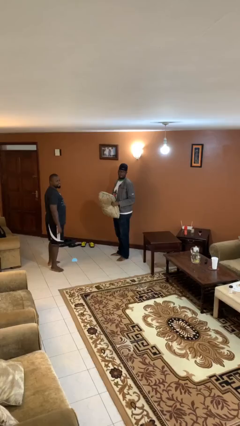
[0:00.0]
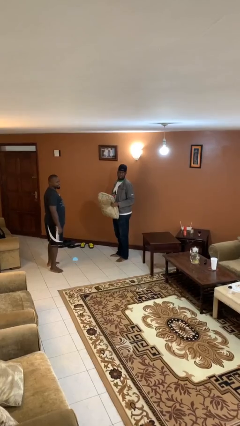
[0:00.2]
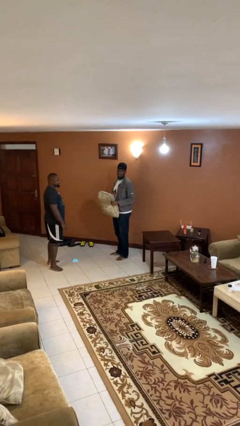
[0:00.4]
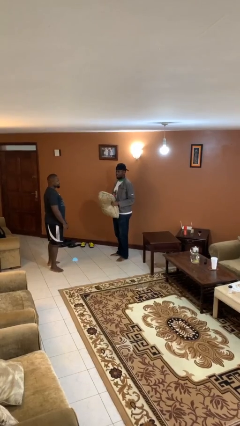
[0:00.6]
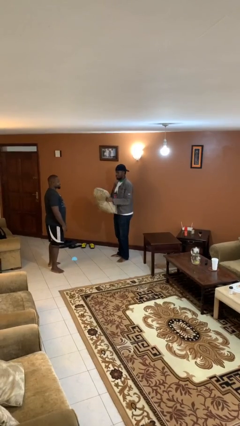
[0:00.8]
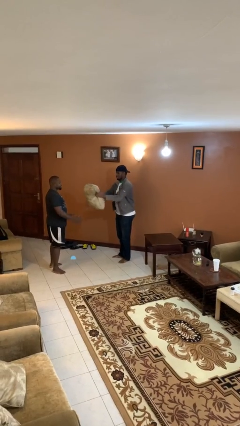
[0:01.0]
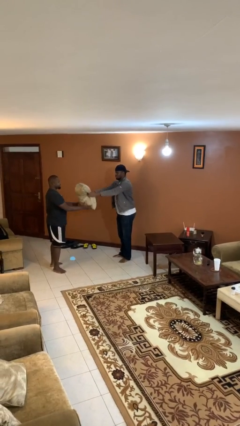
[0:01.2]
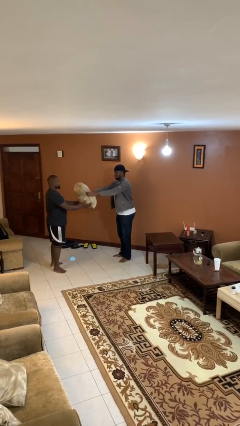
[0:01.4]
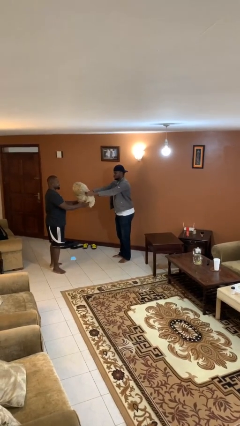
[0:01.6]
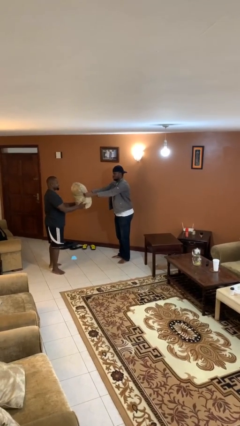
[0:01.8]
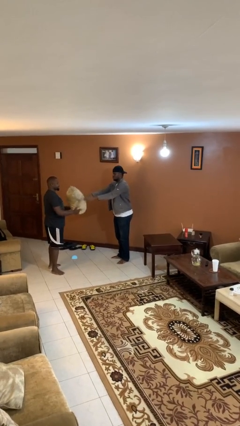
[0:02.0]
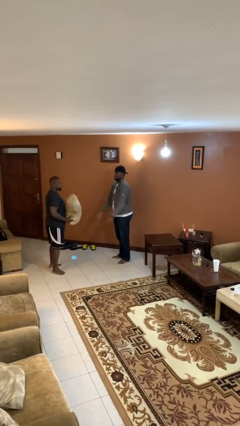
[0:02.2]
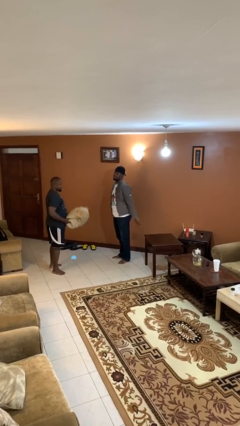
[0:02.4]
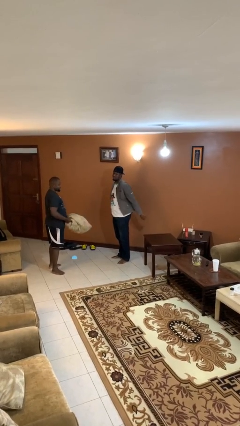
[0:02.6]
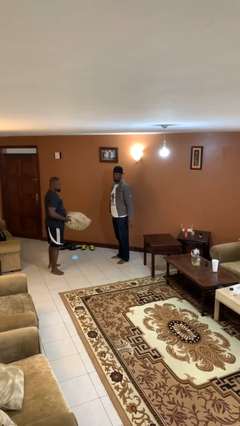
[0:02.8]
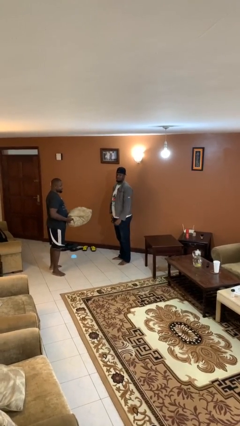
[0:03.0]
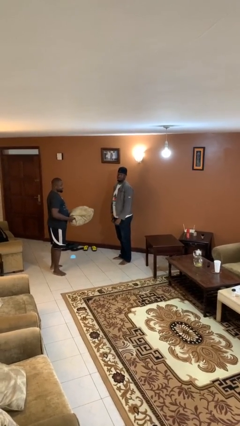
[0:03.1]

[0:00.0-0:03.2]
person transfers object to person

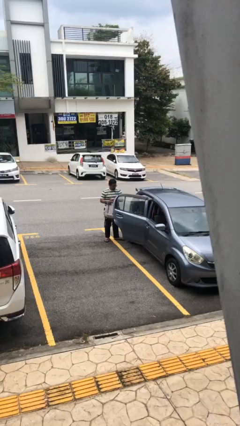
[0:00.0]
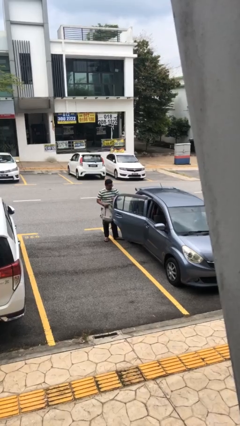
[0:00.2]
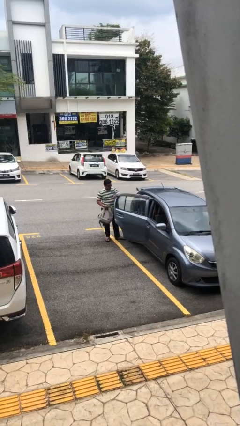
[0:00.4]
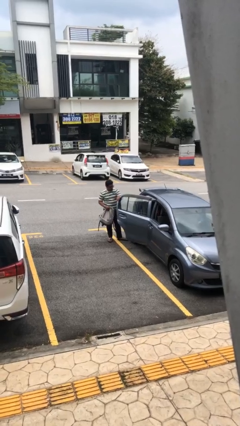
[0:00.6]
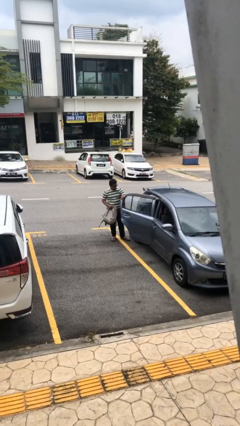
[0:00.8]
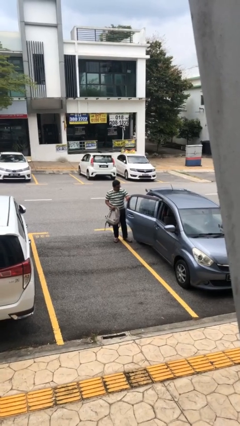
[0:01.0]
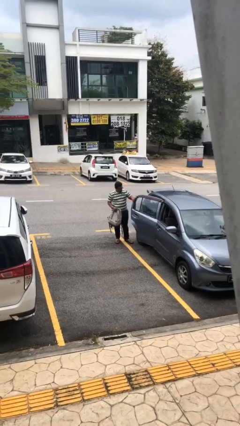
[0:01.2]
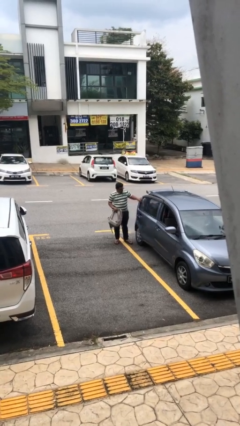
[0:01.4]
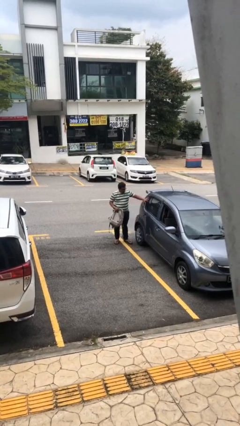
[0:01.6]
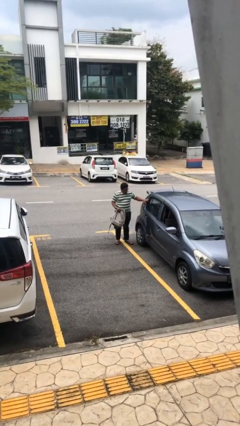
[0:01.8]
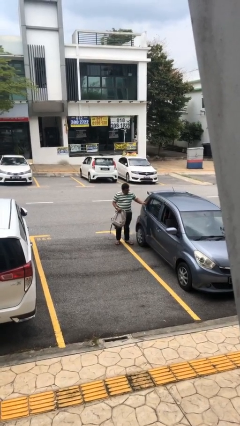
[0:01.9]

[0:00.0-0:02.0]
person closes car door

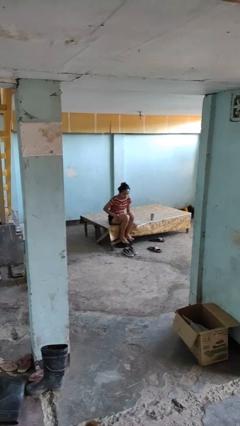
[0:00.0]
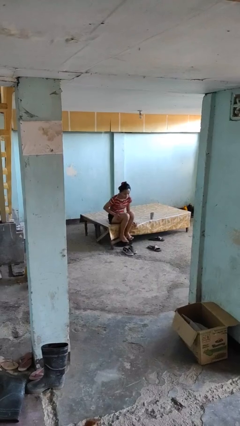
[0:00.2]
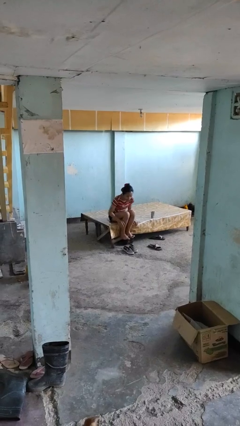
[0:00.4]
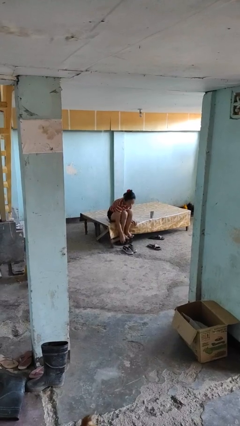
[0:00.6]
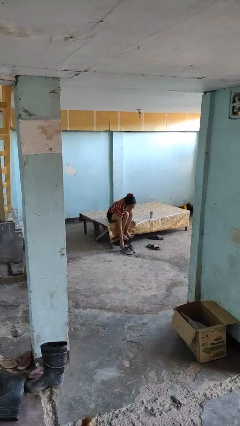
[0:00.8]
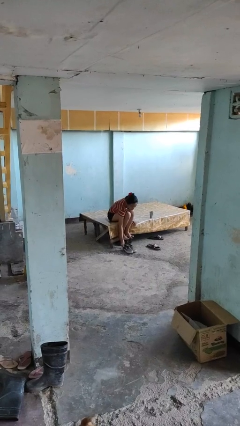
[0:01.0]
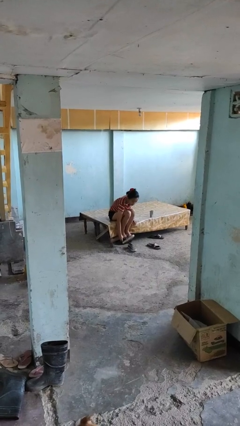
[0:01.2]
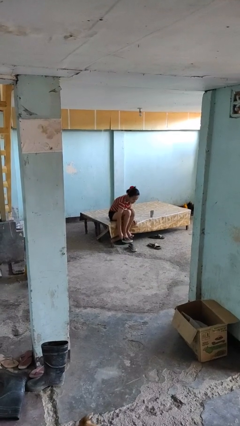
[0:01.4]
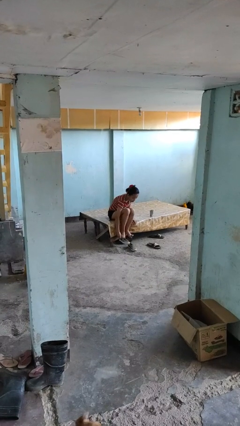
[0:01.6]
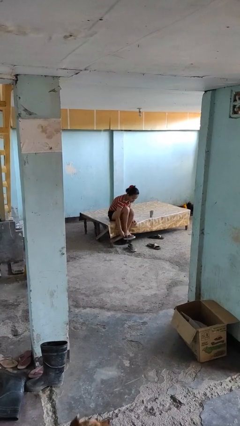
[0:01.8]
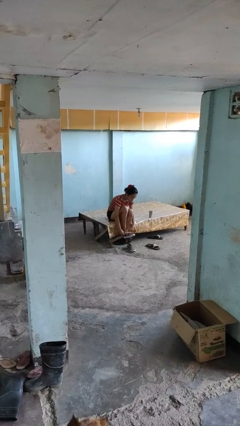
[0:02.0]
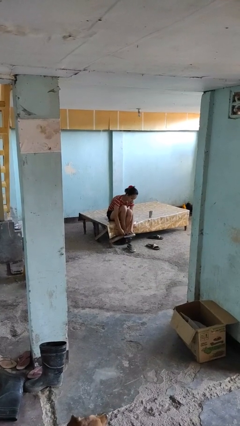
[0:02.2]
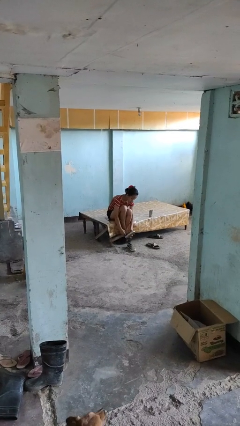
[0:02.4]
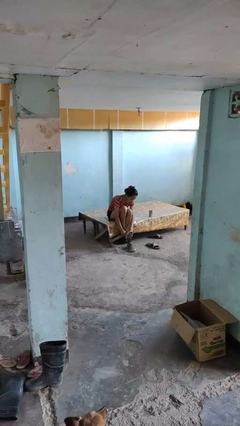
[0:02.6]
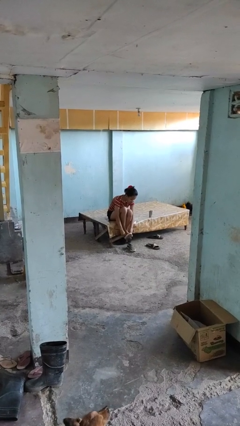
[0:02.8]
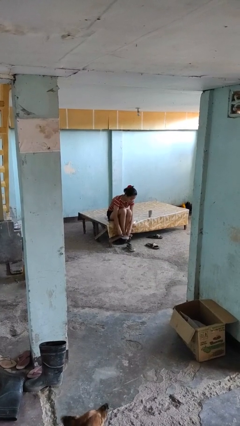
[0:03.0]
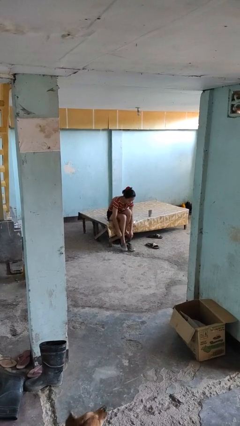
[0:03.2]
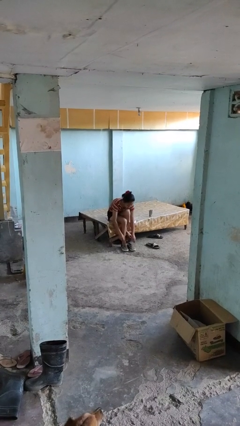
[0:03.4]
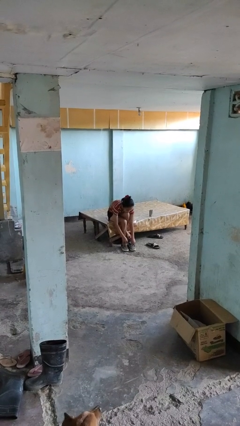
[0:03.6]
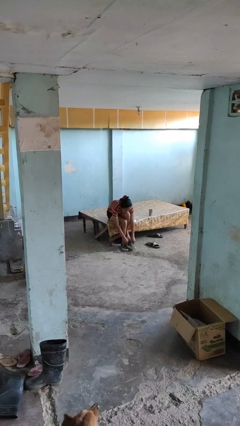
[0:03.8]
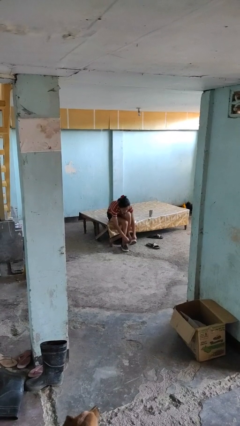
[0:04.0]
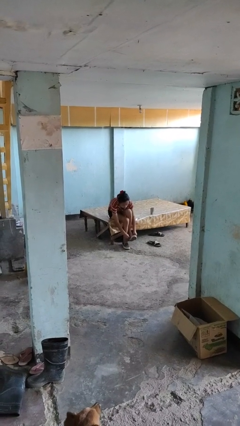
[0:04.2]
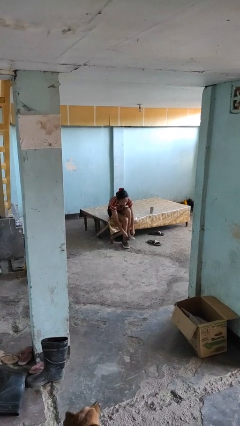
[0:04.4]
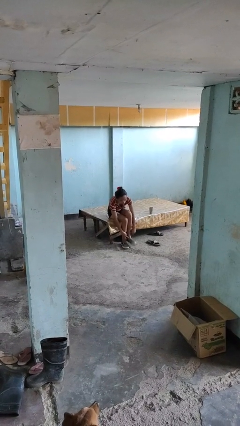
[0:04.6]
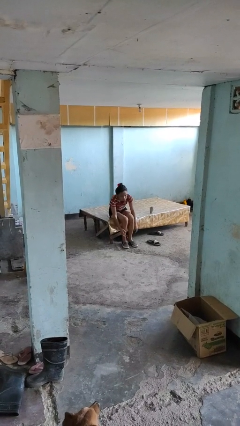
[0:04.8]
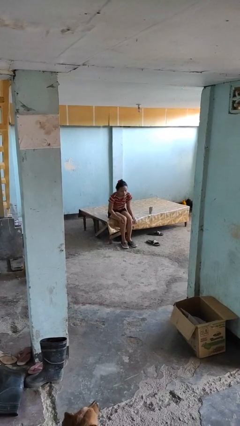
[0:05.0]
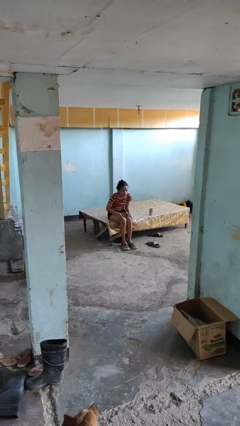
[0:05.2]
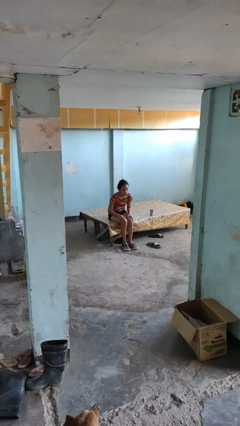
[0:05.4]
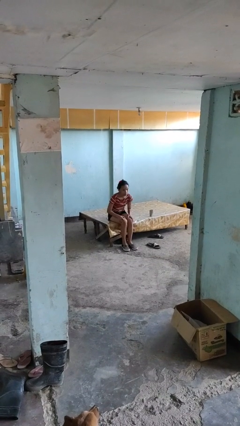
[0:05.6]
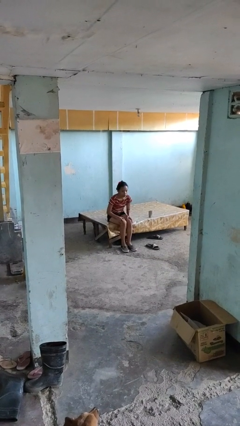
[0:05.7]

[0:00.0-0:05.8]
person puts on shoes

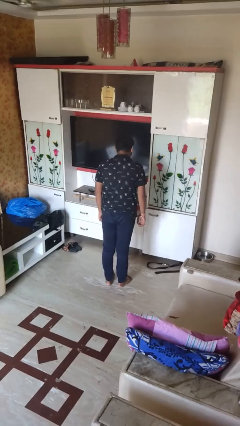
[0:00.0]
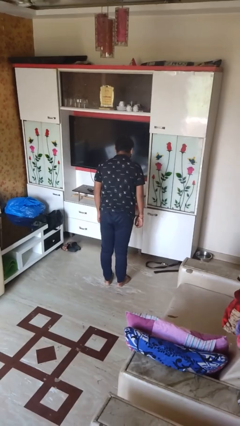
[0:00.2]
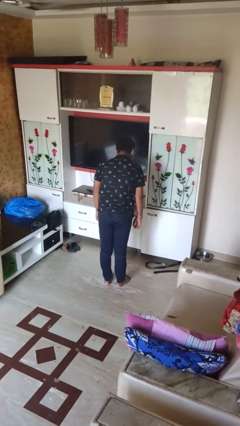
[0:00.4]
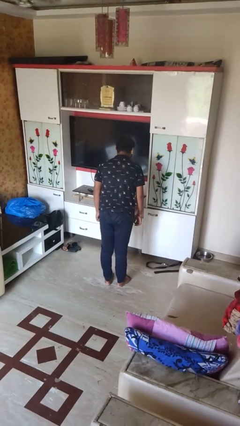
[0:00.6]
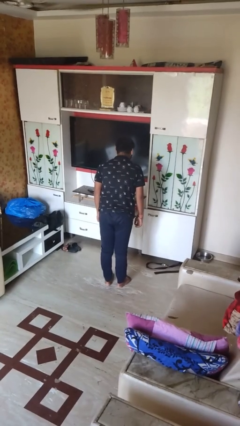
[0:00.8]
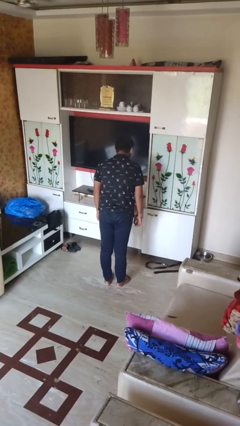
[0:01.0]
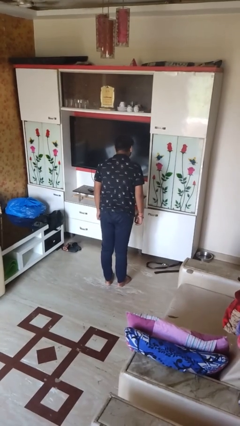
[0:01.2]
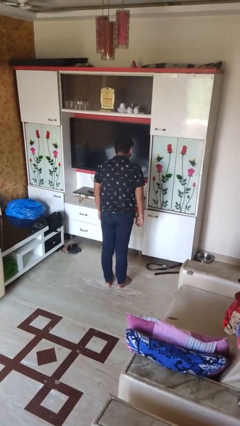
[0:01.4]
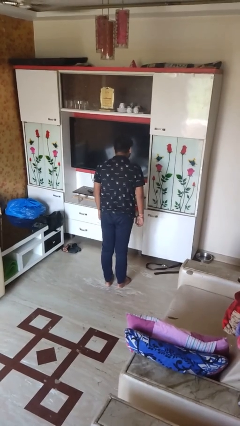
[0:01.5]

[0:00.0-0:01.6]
person wiggles hips

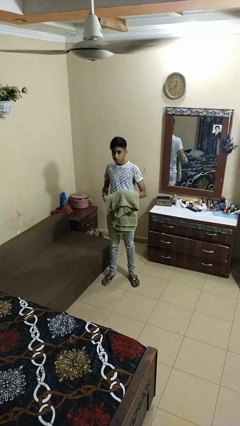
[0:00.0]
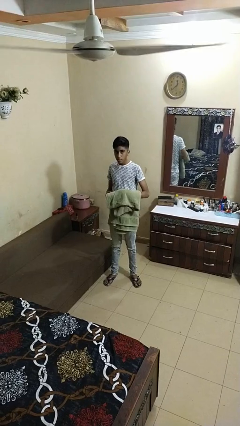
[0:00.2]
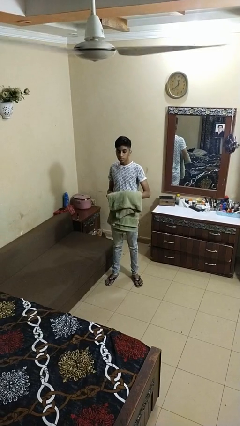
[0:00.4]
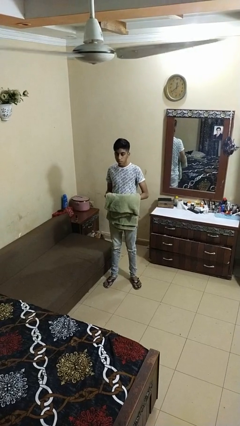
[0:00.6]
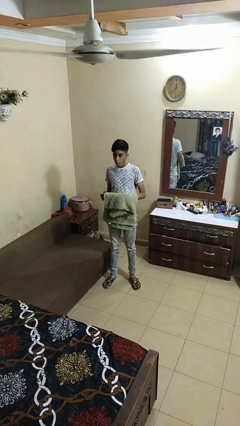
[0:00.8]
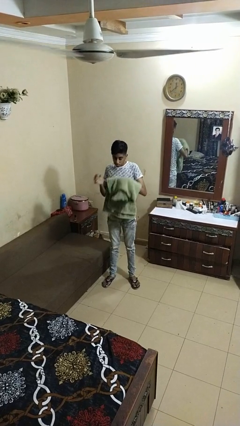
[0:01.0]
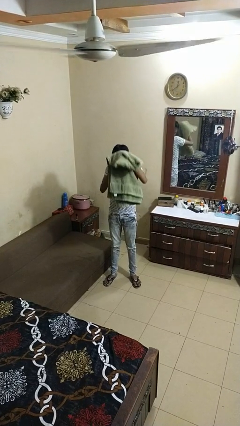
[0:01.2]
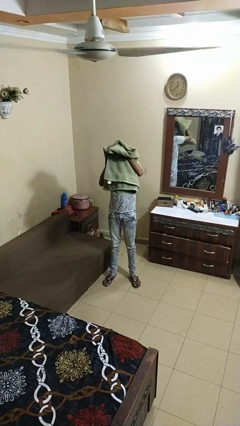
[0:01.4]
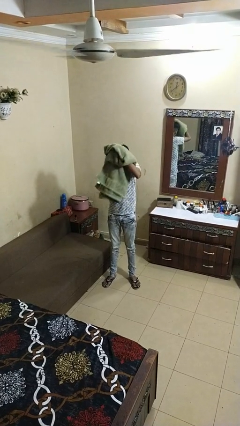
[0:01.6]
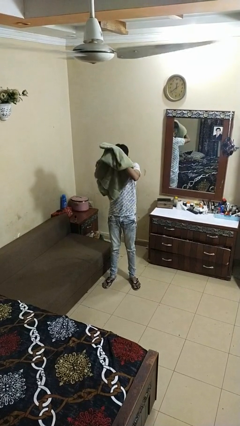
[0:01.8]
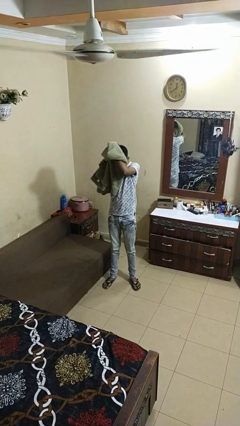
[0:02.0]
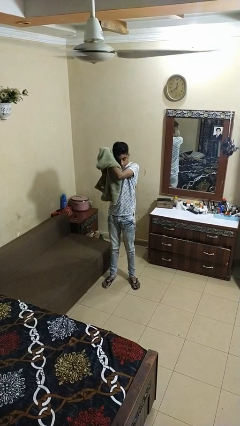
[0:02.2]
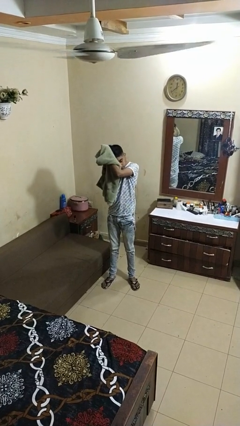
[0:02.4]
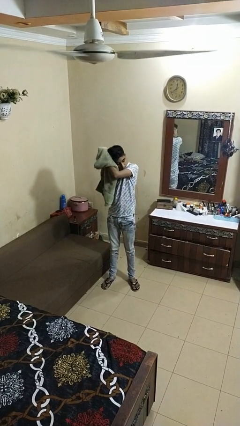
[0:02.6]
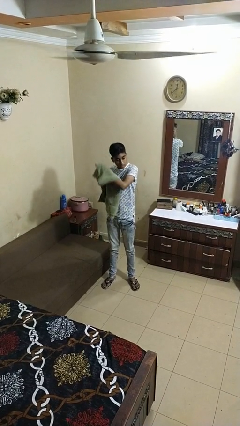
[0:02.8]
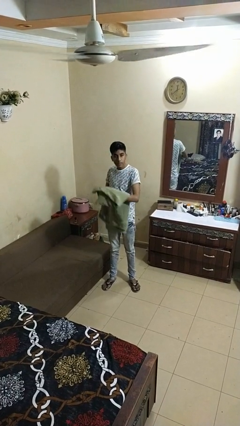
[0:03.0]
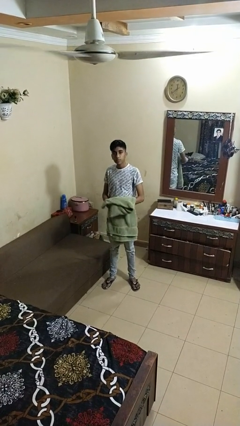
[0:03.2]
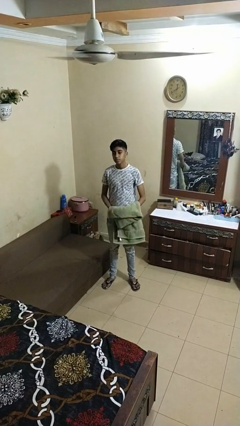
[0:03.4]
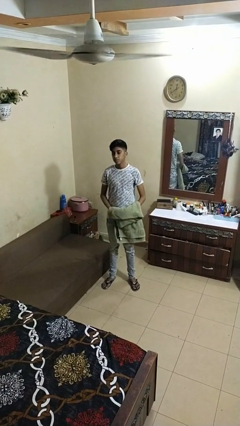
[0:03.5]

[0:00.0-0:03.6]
person dries hair with towel

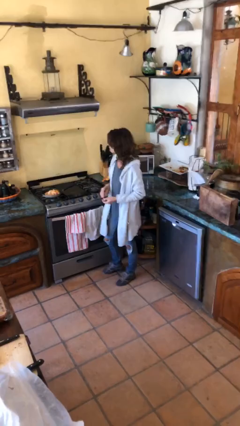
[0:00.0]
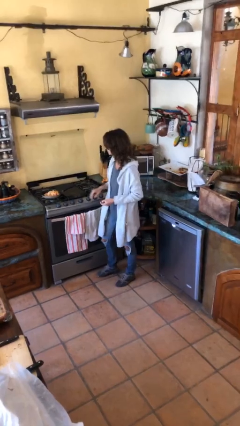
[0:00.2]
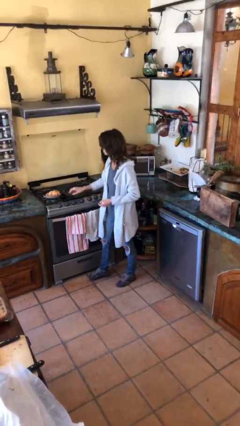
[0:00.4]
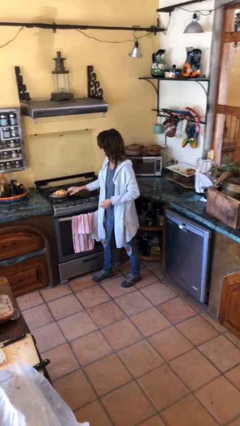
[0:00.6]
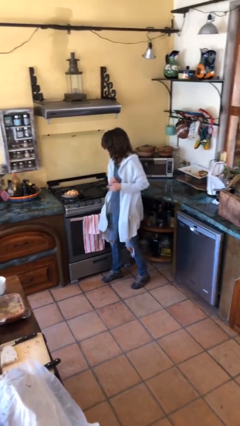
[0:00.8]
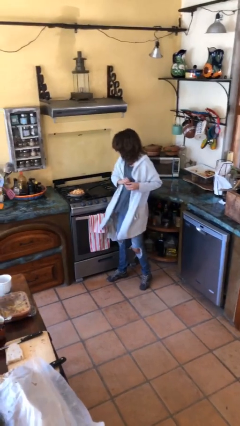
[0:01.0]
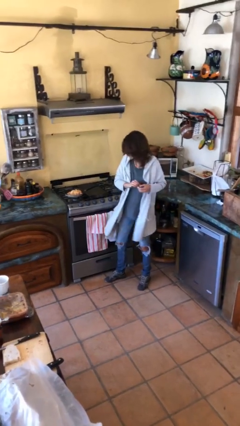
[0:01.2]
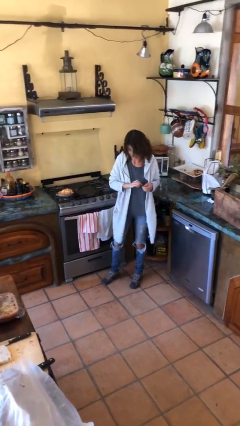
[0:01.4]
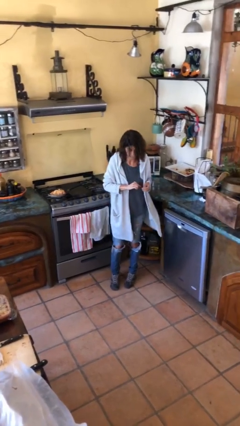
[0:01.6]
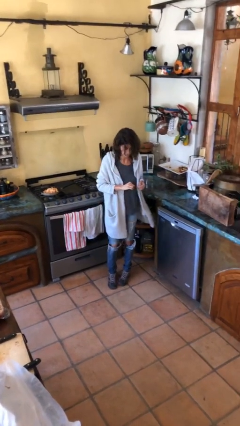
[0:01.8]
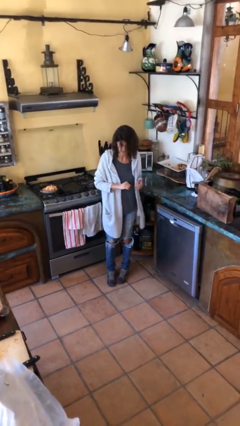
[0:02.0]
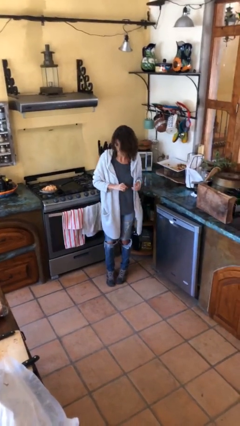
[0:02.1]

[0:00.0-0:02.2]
person burns hand
